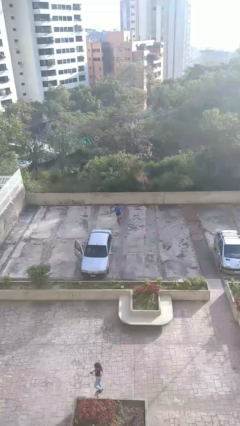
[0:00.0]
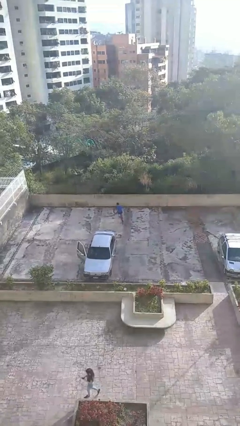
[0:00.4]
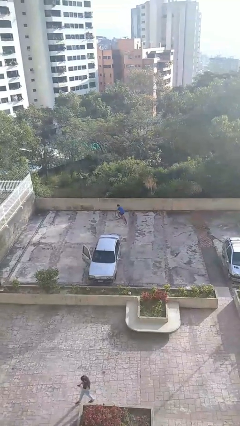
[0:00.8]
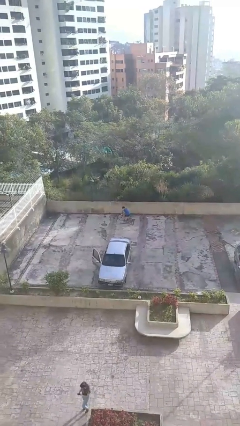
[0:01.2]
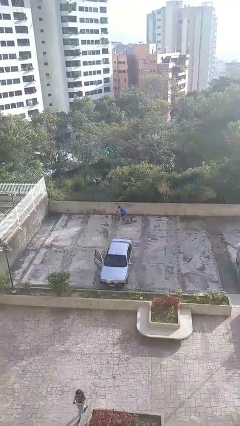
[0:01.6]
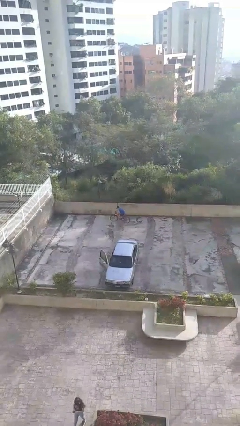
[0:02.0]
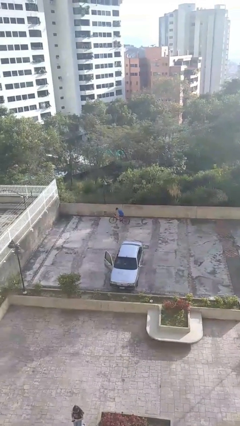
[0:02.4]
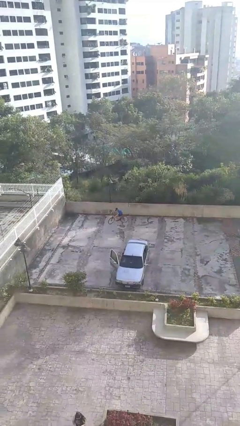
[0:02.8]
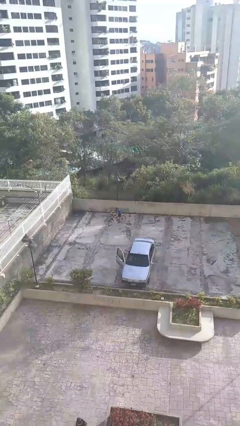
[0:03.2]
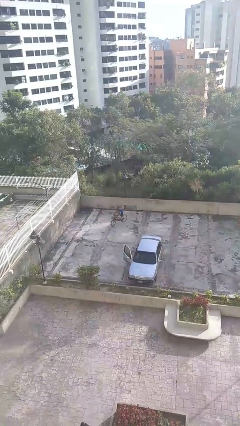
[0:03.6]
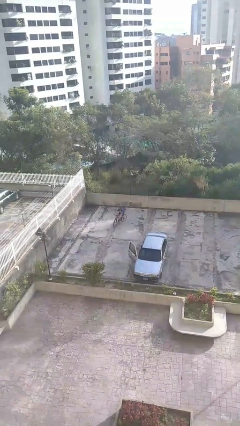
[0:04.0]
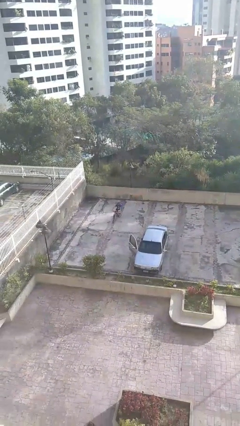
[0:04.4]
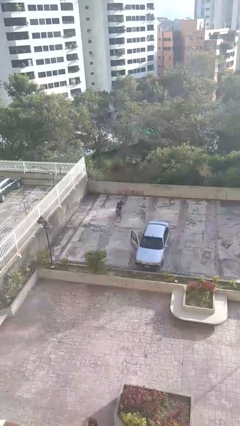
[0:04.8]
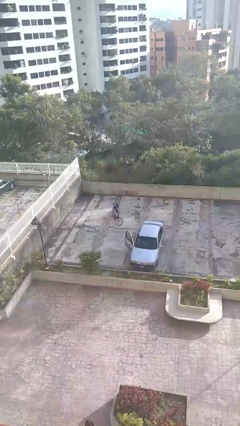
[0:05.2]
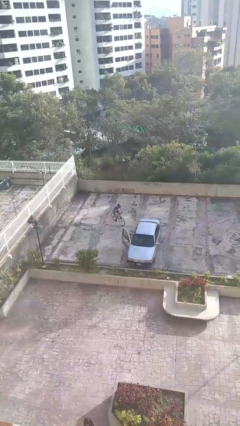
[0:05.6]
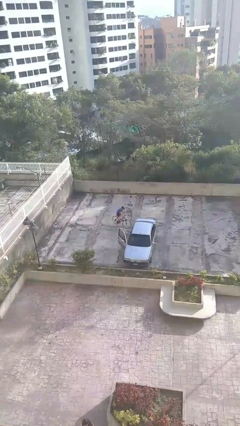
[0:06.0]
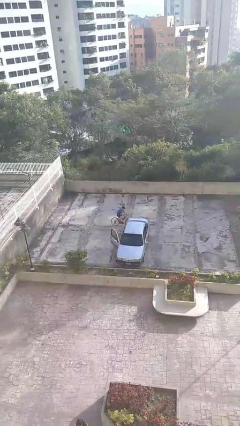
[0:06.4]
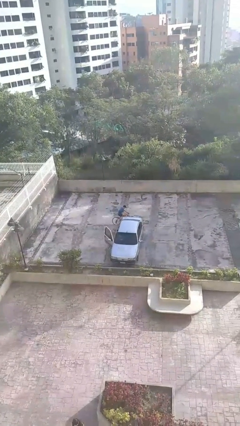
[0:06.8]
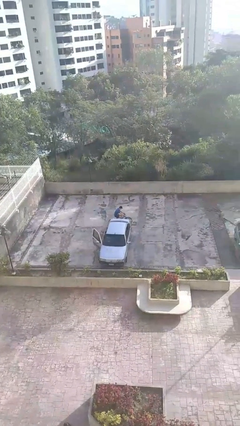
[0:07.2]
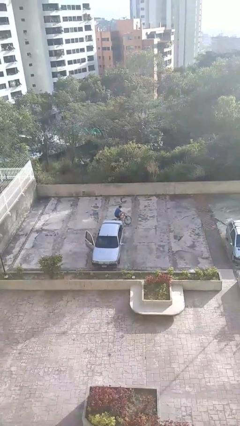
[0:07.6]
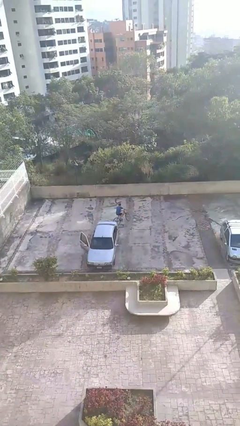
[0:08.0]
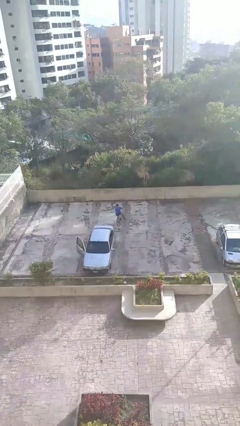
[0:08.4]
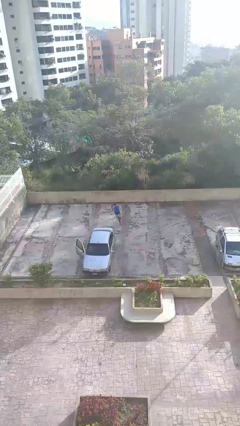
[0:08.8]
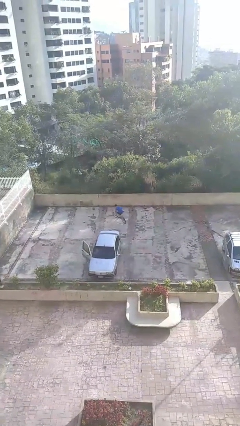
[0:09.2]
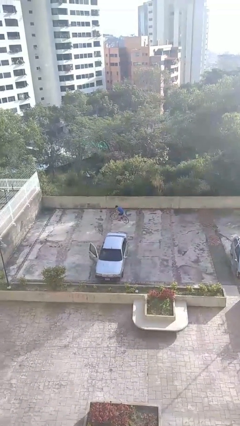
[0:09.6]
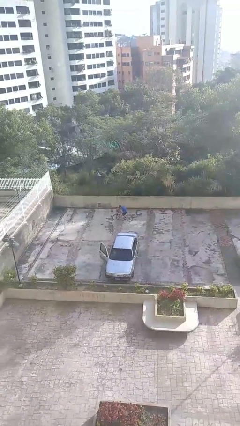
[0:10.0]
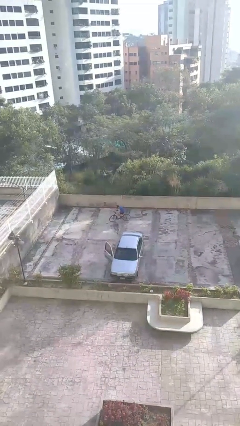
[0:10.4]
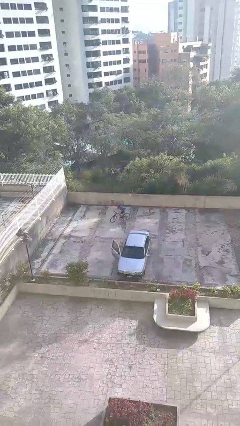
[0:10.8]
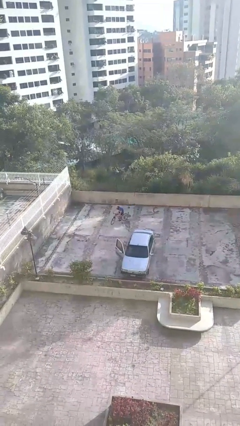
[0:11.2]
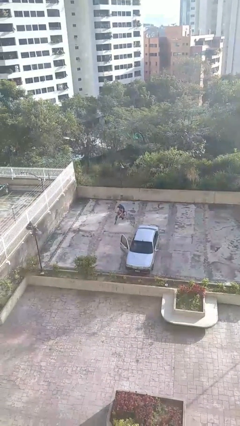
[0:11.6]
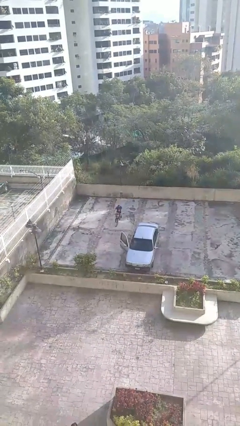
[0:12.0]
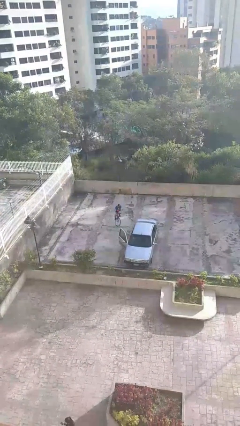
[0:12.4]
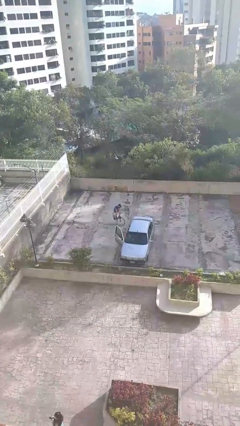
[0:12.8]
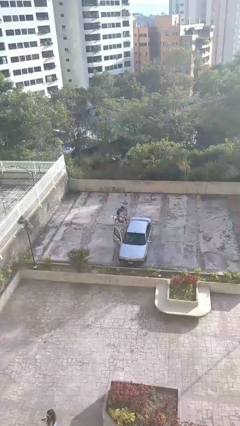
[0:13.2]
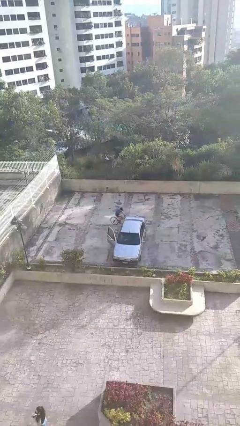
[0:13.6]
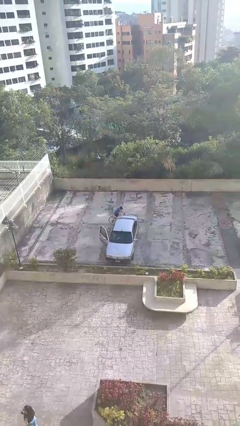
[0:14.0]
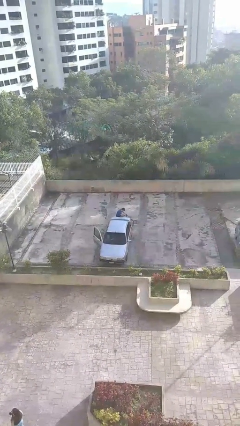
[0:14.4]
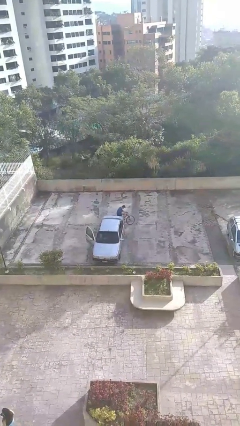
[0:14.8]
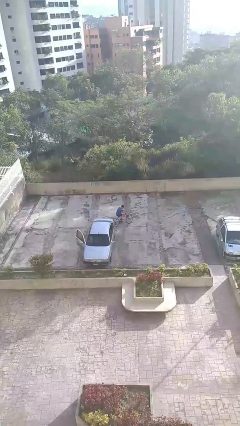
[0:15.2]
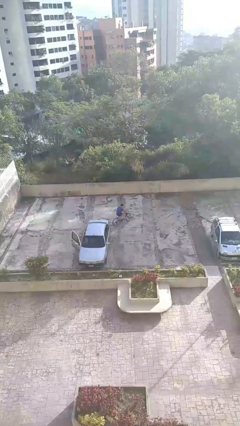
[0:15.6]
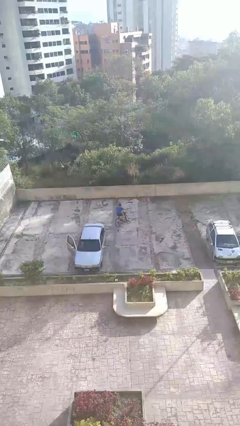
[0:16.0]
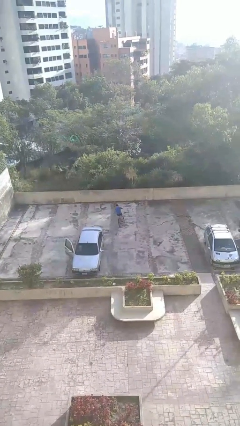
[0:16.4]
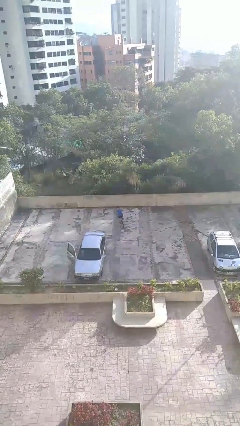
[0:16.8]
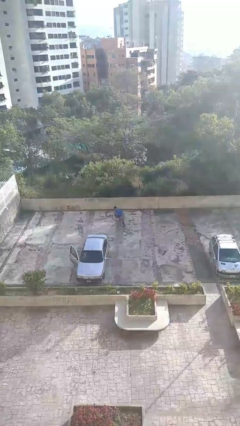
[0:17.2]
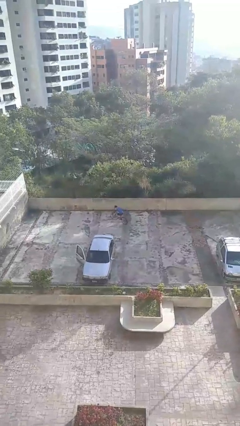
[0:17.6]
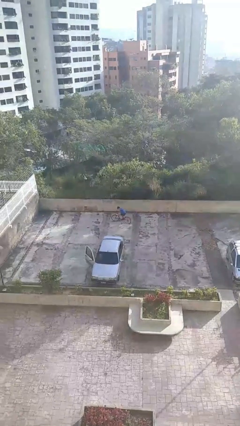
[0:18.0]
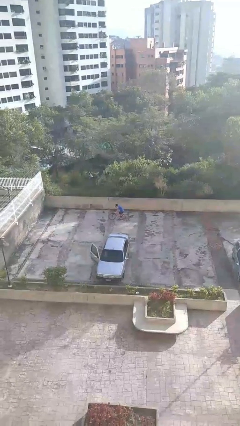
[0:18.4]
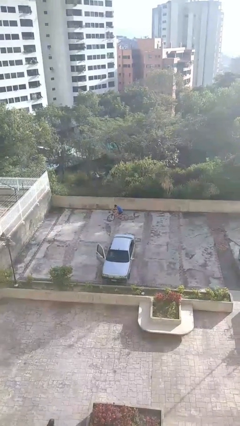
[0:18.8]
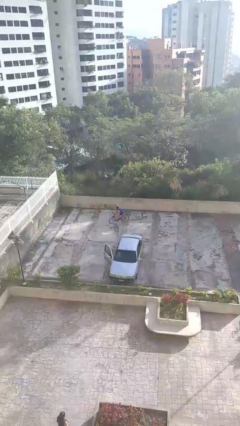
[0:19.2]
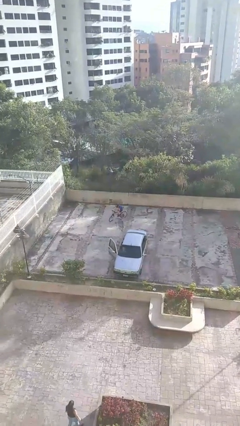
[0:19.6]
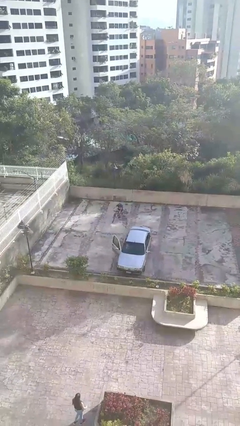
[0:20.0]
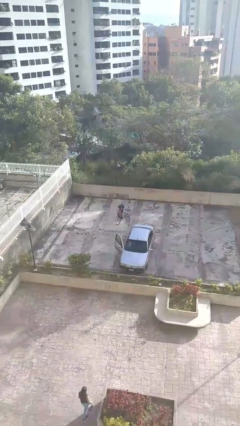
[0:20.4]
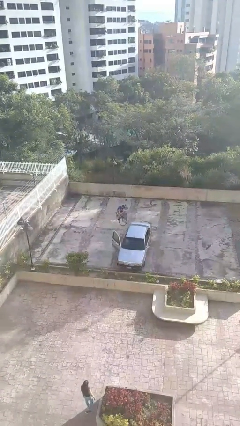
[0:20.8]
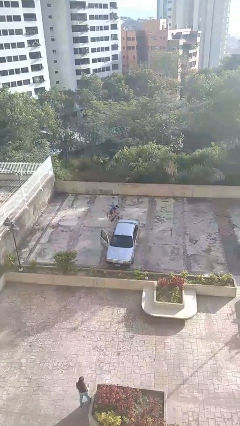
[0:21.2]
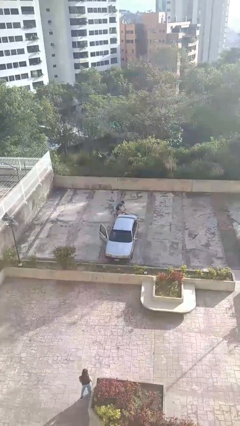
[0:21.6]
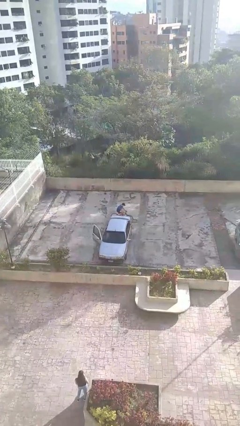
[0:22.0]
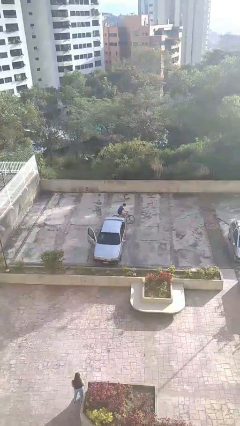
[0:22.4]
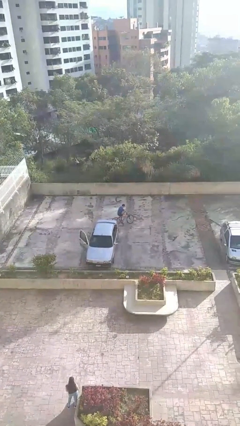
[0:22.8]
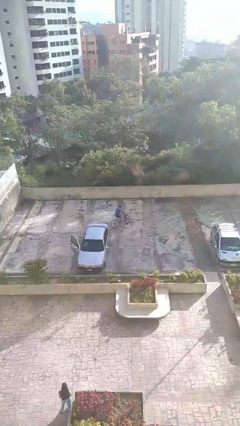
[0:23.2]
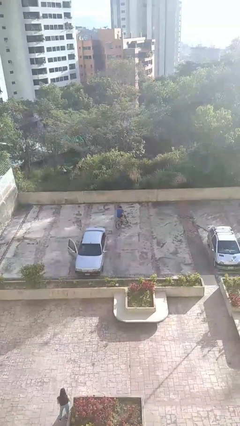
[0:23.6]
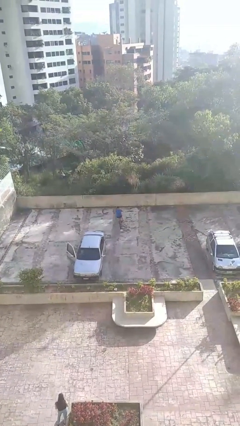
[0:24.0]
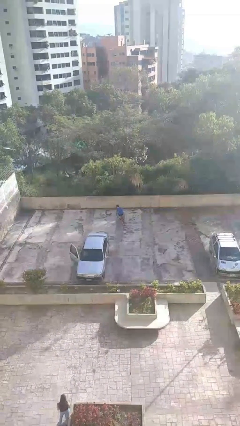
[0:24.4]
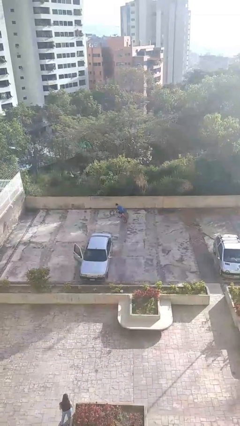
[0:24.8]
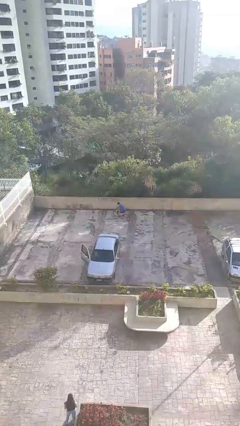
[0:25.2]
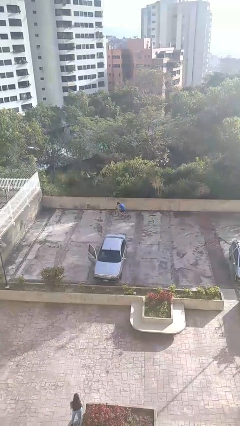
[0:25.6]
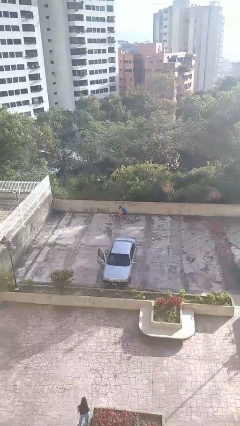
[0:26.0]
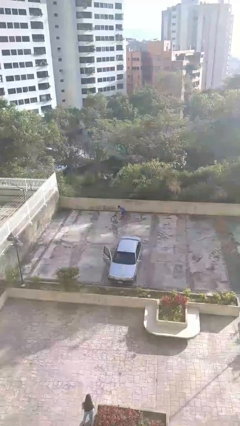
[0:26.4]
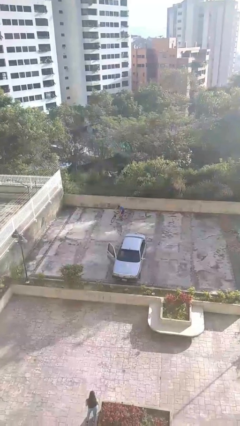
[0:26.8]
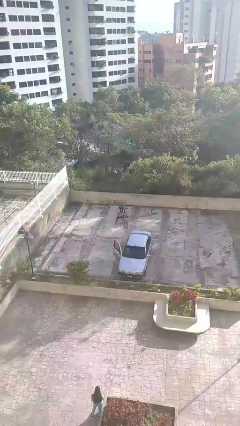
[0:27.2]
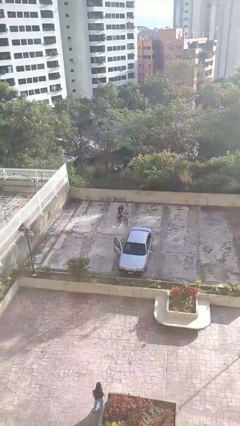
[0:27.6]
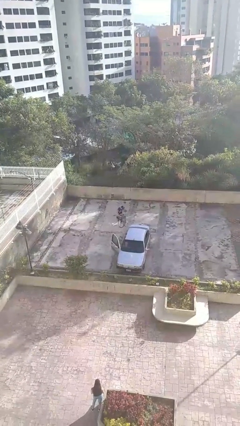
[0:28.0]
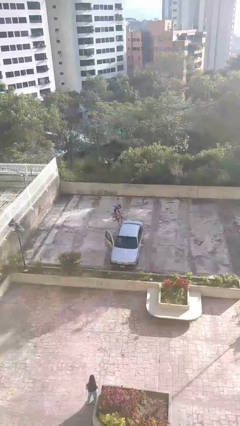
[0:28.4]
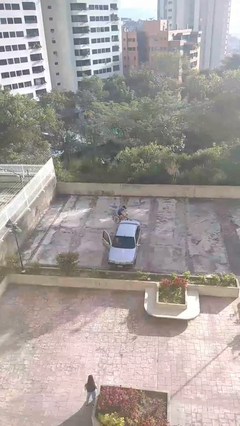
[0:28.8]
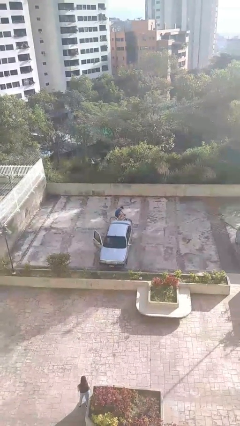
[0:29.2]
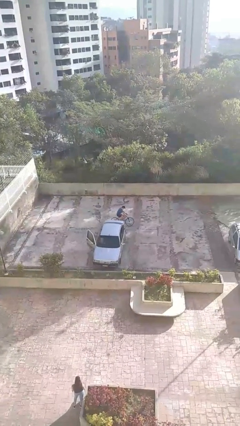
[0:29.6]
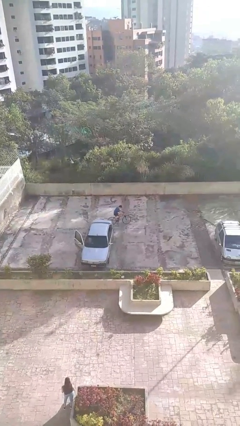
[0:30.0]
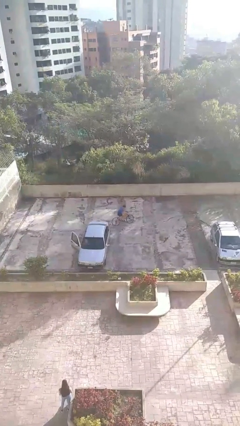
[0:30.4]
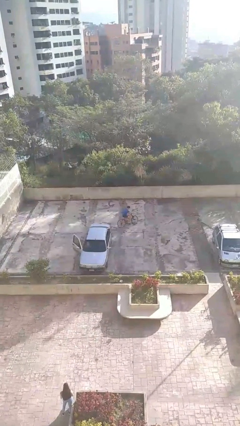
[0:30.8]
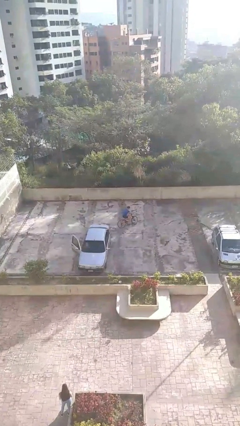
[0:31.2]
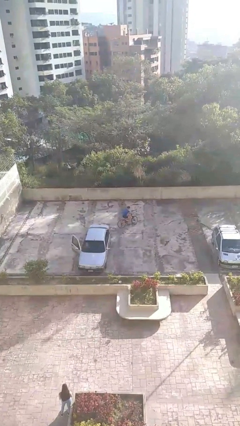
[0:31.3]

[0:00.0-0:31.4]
person rides bicycle

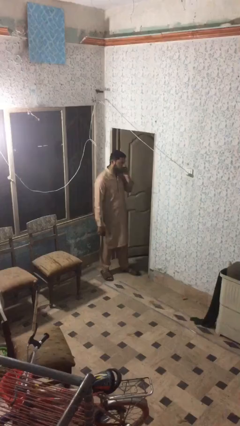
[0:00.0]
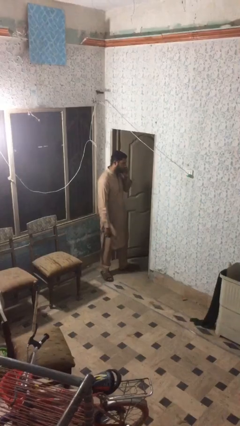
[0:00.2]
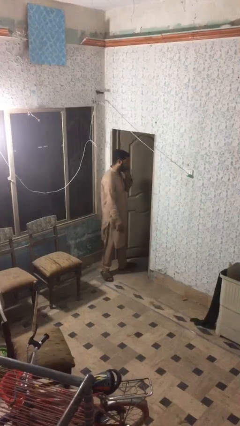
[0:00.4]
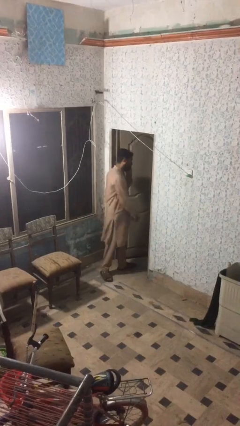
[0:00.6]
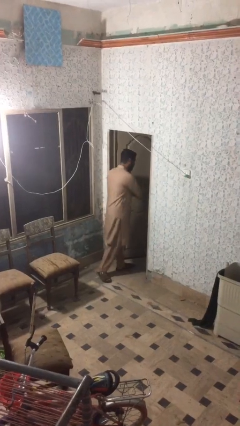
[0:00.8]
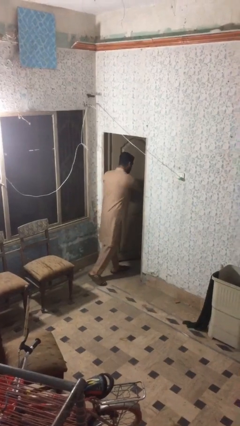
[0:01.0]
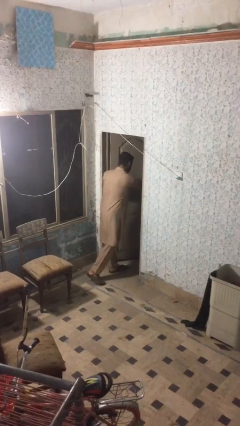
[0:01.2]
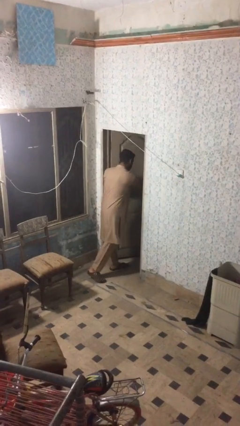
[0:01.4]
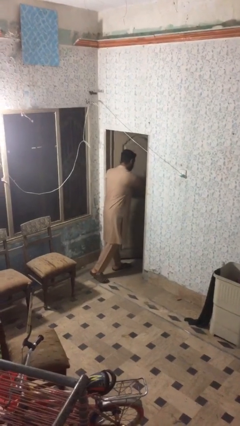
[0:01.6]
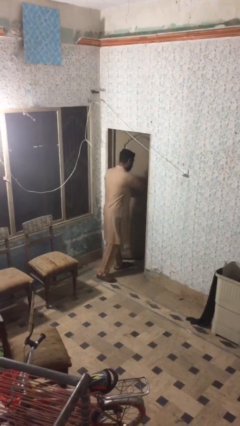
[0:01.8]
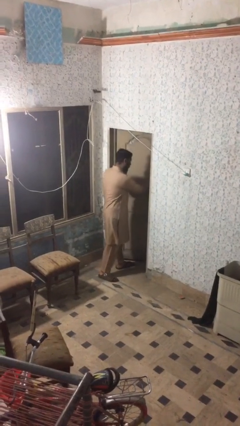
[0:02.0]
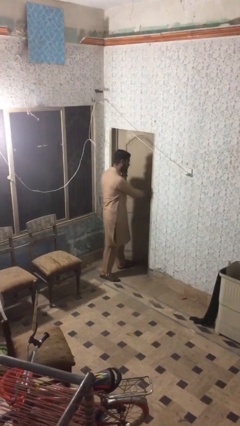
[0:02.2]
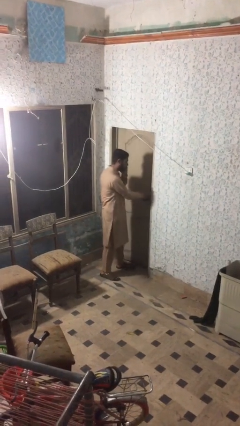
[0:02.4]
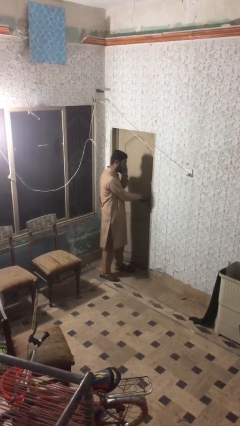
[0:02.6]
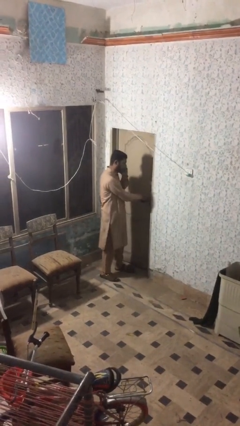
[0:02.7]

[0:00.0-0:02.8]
person closes facility door
